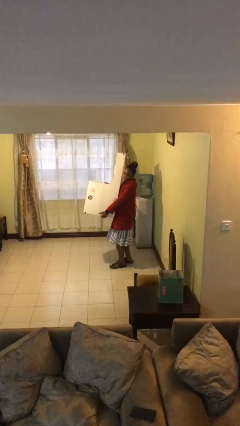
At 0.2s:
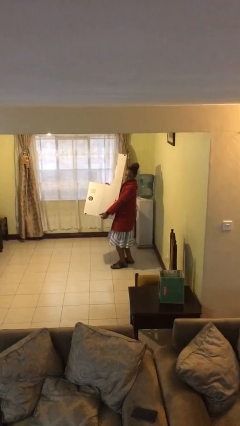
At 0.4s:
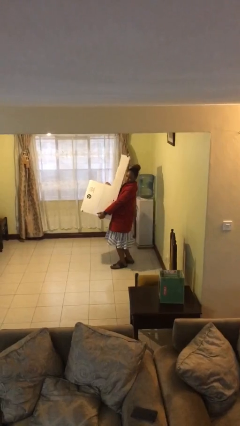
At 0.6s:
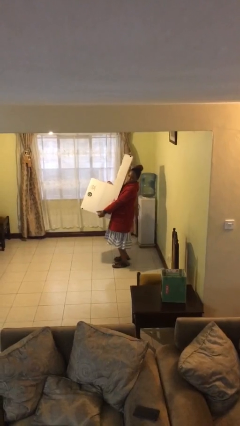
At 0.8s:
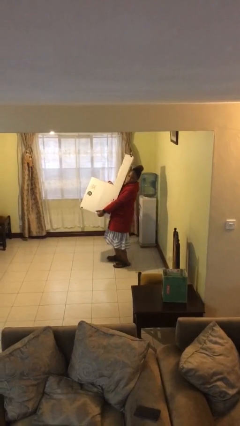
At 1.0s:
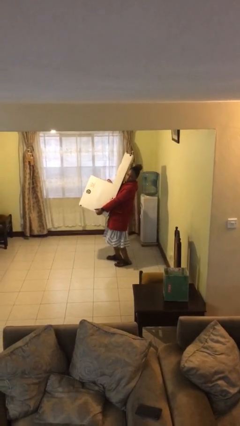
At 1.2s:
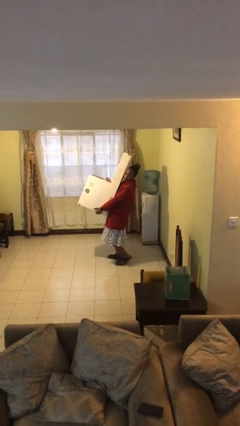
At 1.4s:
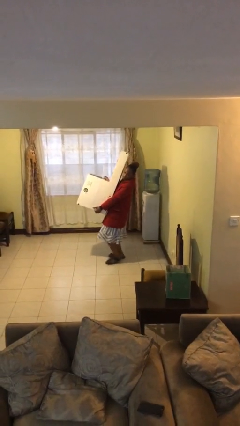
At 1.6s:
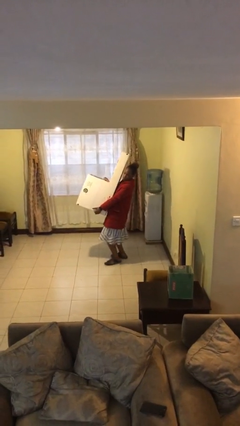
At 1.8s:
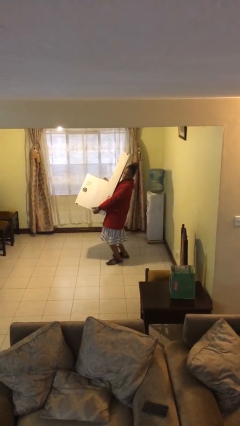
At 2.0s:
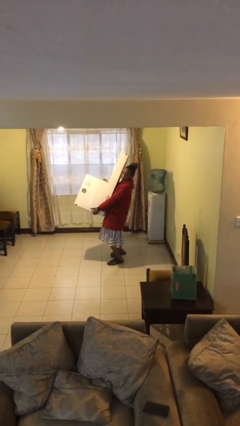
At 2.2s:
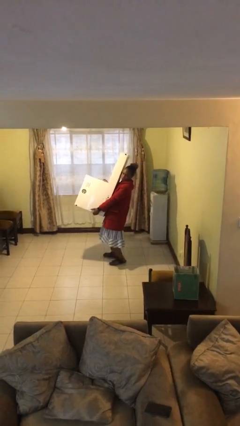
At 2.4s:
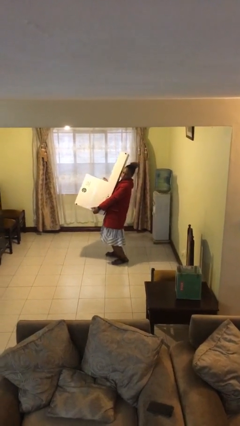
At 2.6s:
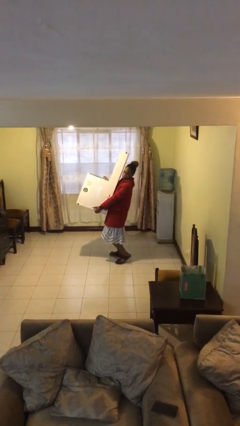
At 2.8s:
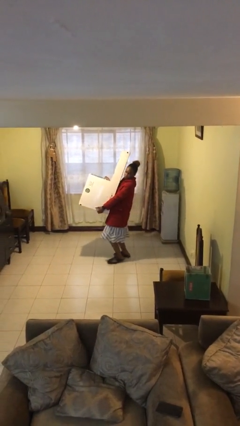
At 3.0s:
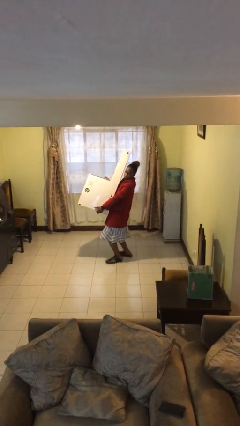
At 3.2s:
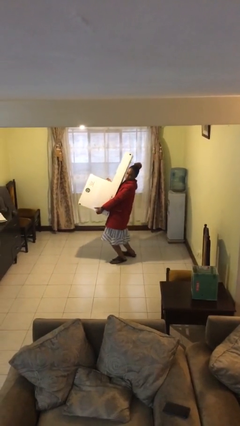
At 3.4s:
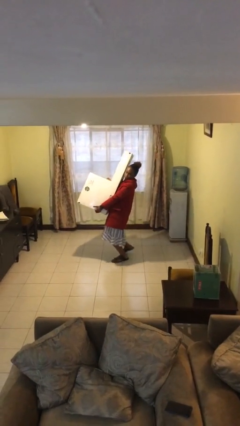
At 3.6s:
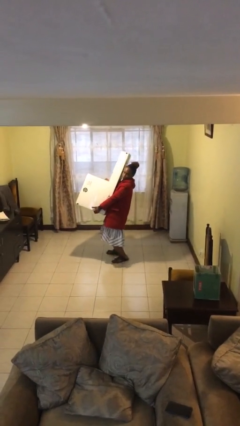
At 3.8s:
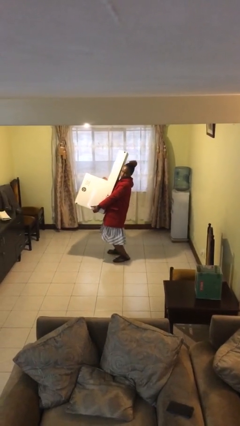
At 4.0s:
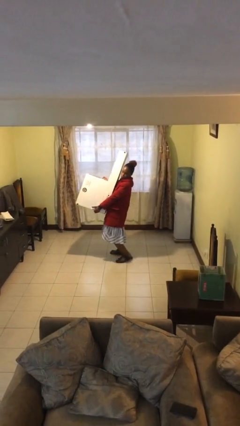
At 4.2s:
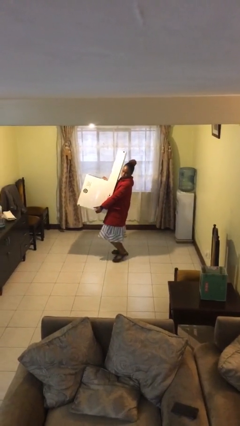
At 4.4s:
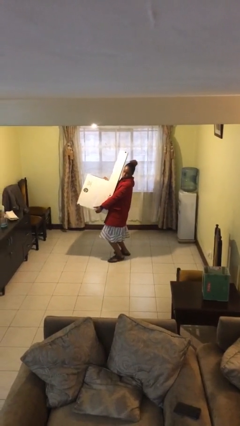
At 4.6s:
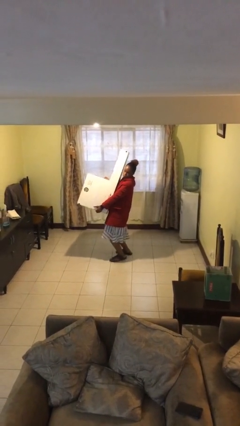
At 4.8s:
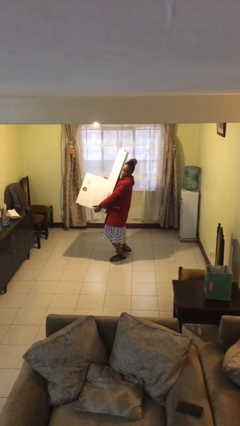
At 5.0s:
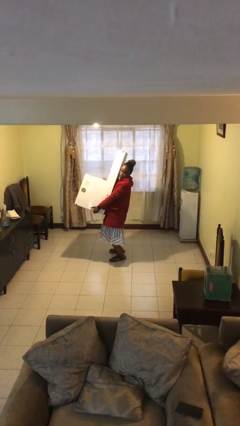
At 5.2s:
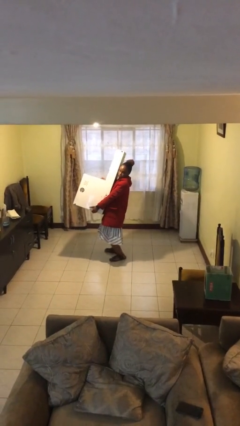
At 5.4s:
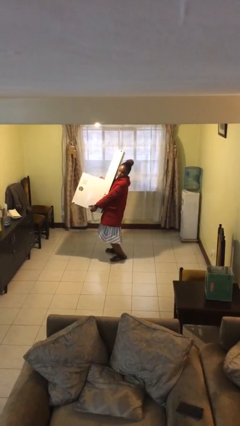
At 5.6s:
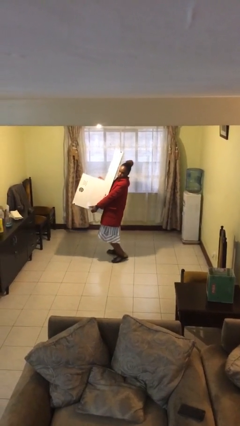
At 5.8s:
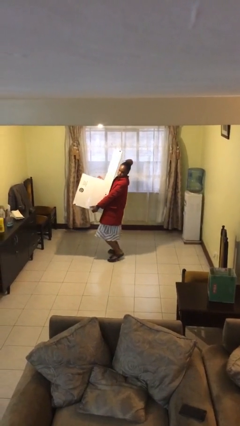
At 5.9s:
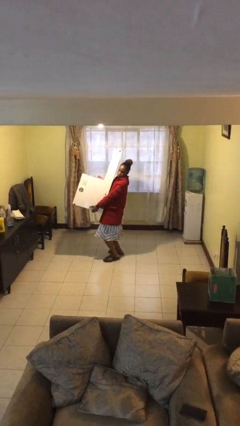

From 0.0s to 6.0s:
person carries heavy object

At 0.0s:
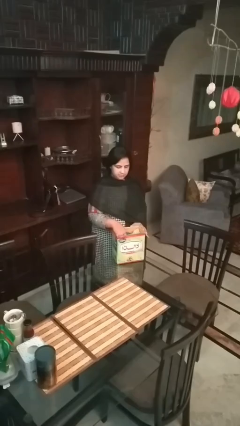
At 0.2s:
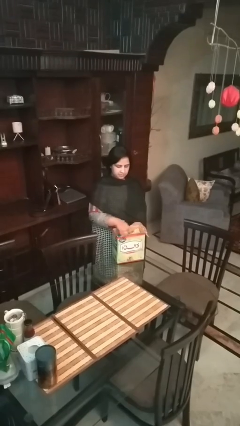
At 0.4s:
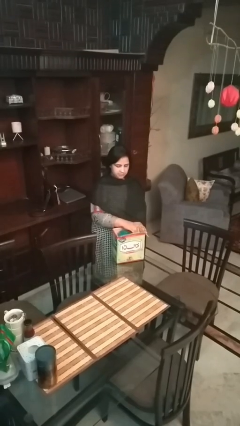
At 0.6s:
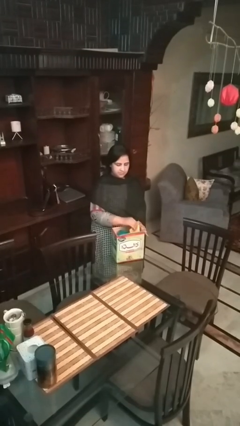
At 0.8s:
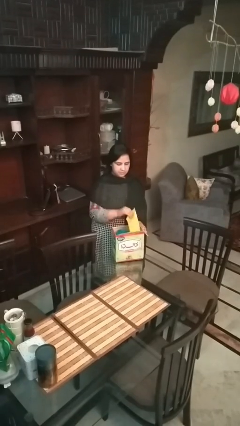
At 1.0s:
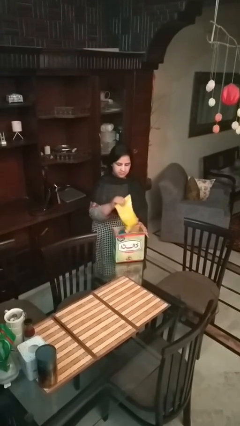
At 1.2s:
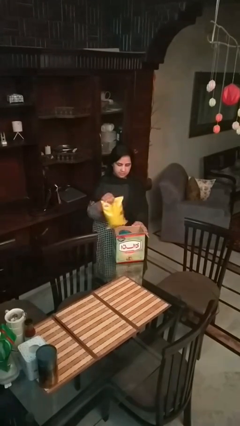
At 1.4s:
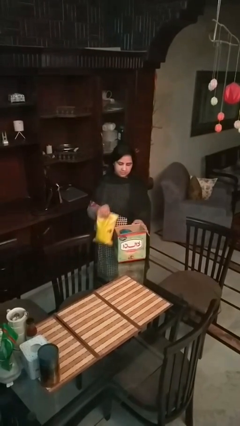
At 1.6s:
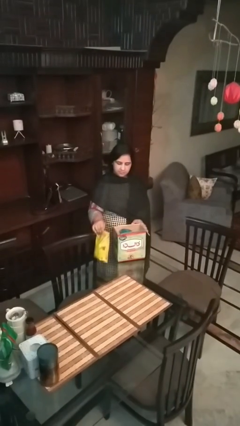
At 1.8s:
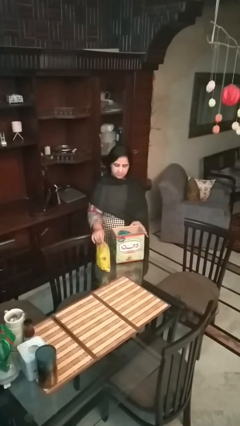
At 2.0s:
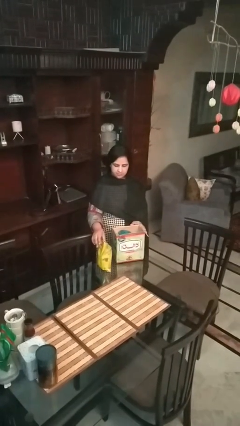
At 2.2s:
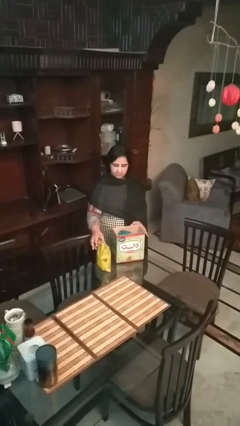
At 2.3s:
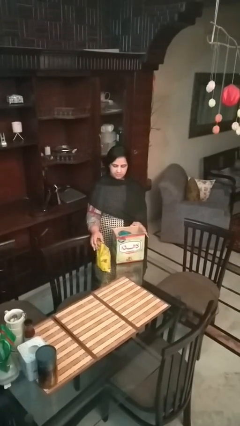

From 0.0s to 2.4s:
person takes object from box

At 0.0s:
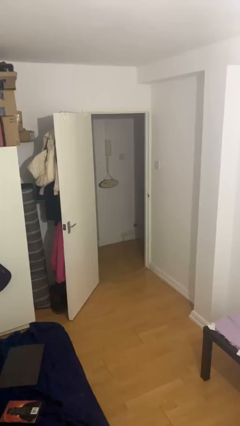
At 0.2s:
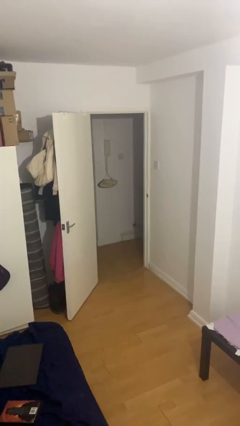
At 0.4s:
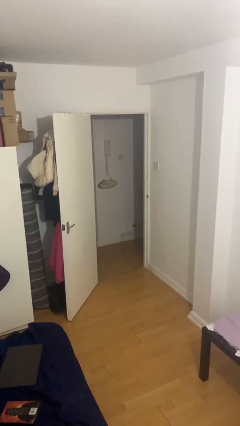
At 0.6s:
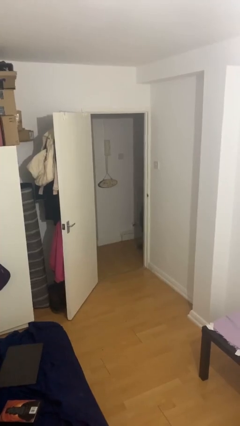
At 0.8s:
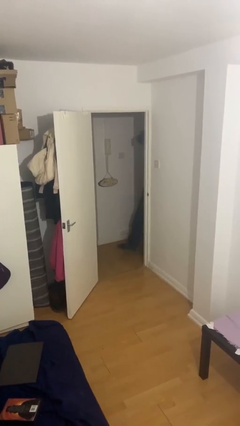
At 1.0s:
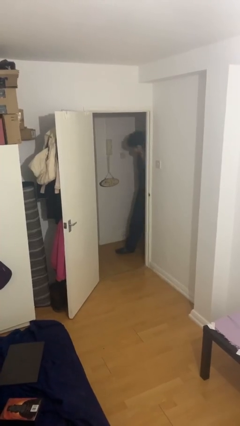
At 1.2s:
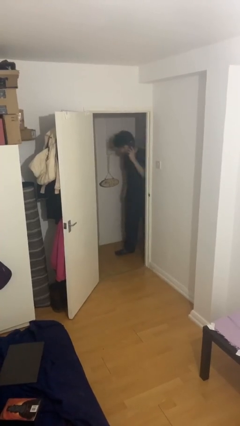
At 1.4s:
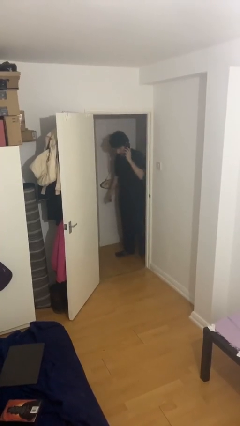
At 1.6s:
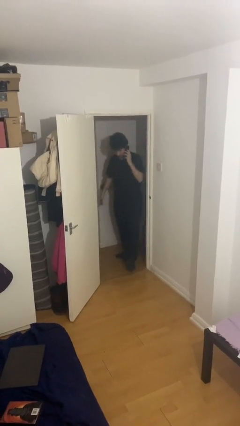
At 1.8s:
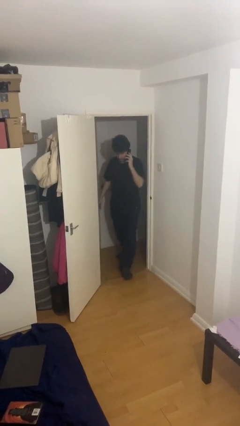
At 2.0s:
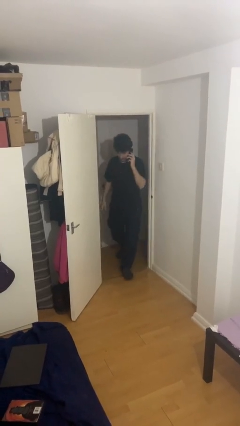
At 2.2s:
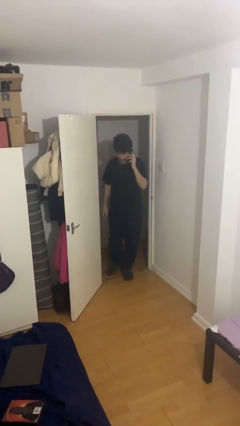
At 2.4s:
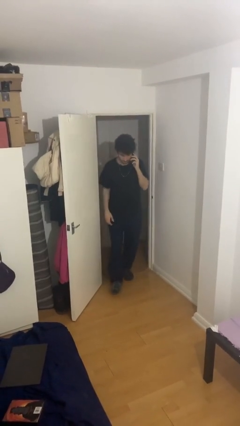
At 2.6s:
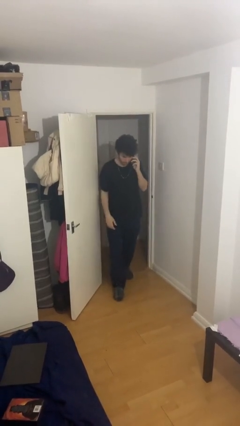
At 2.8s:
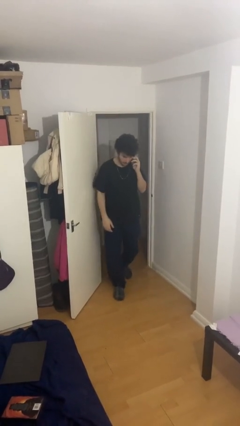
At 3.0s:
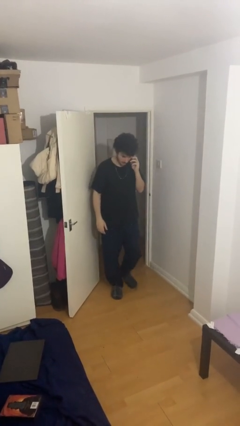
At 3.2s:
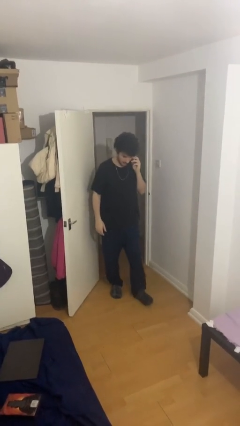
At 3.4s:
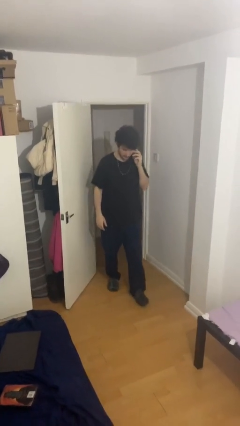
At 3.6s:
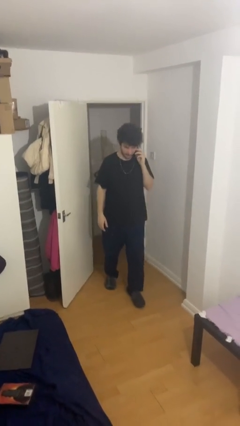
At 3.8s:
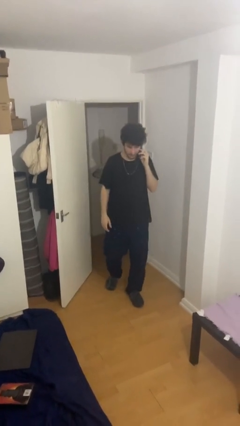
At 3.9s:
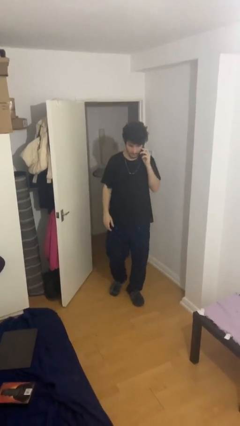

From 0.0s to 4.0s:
person enters scene through structure

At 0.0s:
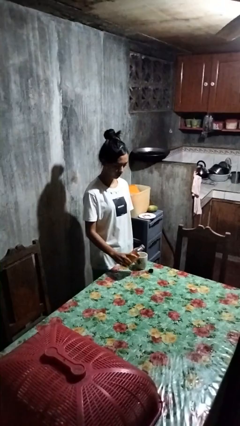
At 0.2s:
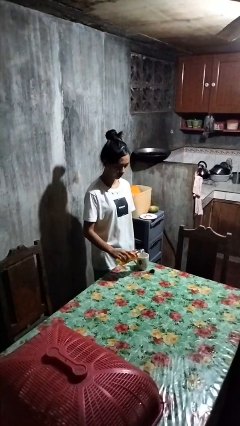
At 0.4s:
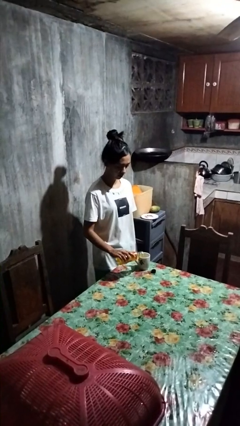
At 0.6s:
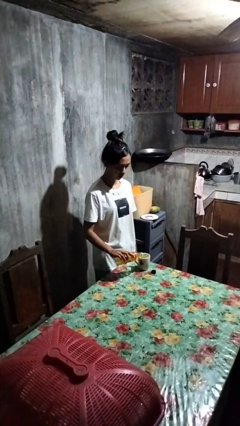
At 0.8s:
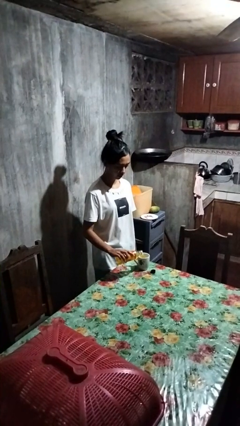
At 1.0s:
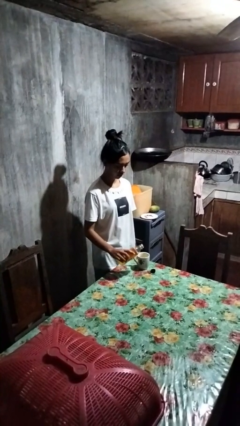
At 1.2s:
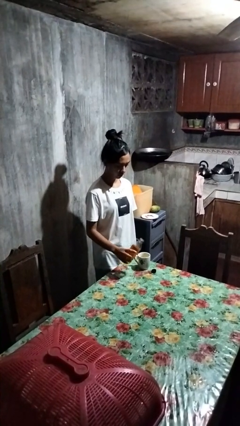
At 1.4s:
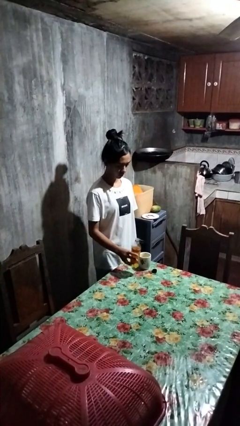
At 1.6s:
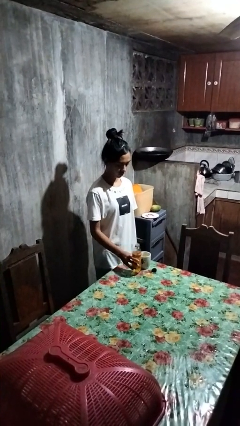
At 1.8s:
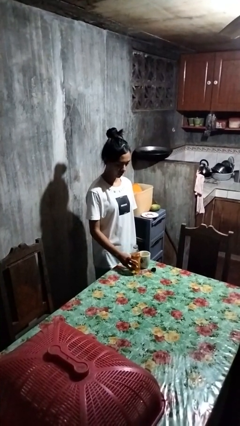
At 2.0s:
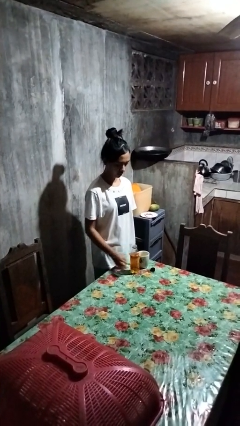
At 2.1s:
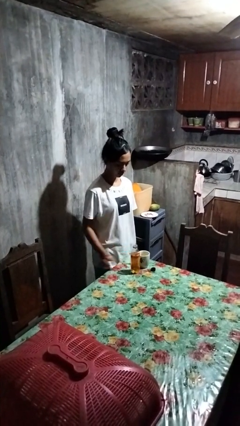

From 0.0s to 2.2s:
person pours liquid into cup

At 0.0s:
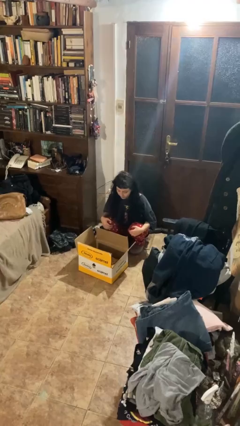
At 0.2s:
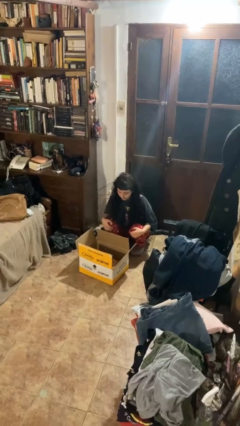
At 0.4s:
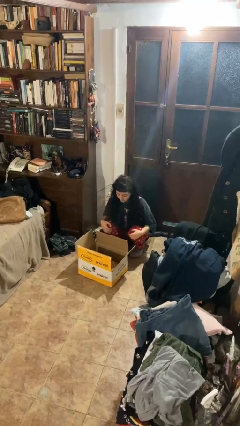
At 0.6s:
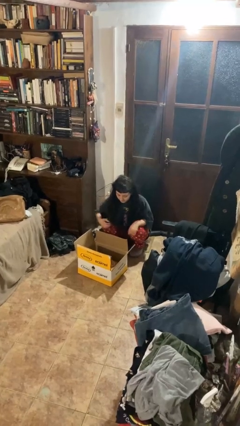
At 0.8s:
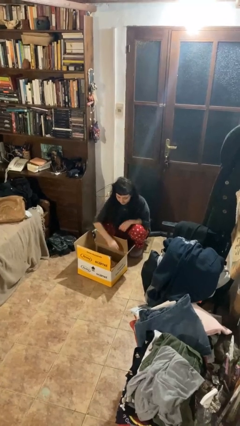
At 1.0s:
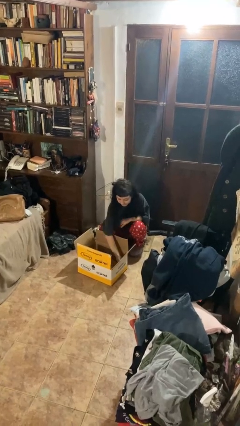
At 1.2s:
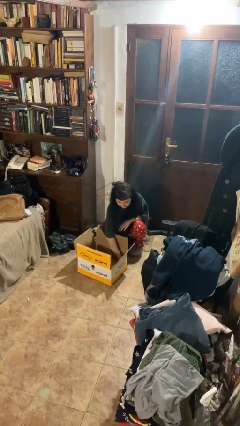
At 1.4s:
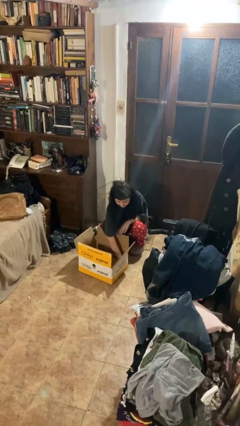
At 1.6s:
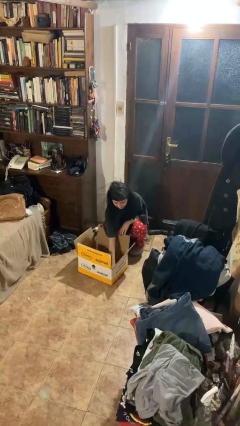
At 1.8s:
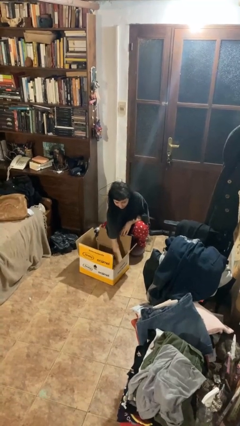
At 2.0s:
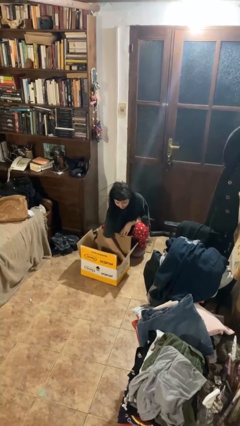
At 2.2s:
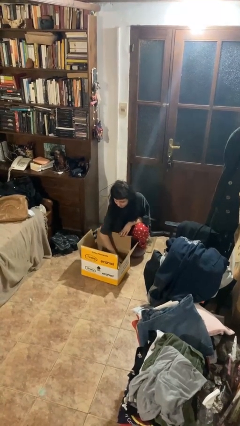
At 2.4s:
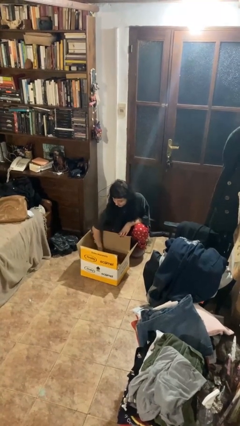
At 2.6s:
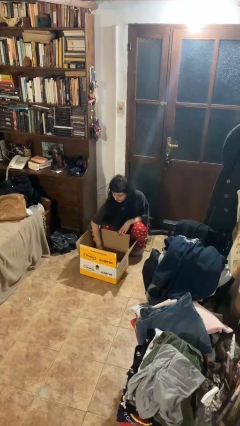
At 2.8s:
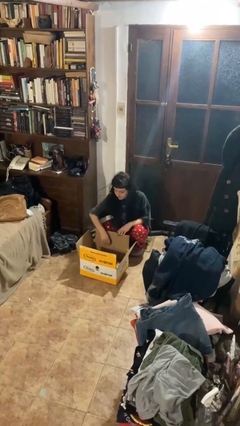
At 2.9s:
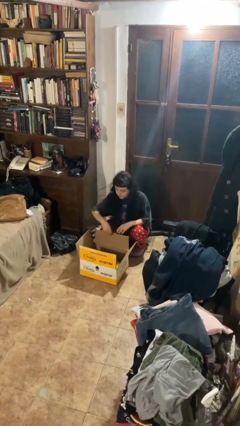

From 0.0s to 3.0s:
person searches in box

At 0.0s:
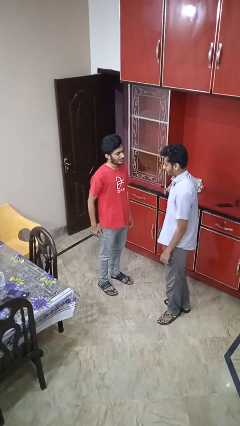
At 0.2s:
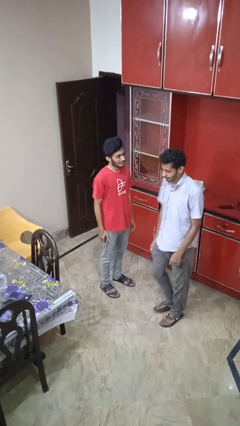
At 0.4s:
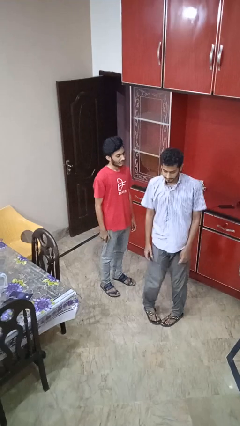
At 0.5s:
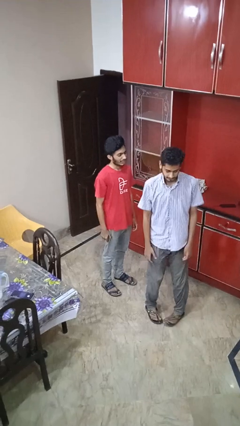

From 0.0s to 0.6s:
person spins person around
